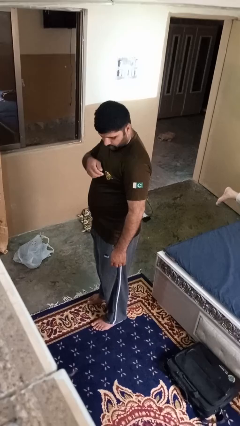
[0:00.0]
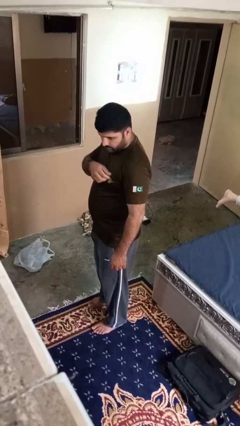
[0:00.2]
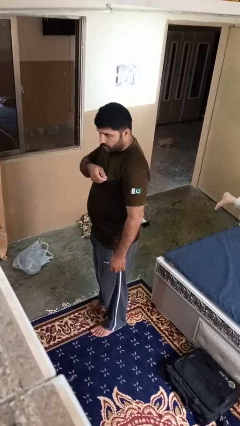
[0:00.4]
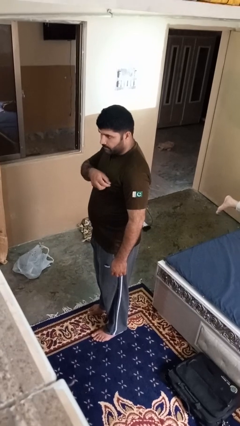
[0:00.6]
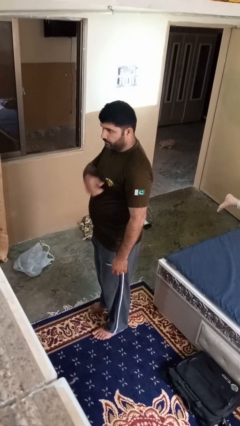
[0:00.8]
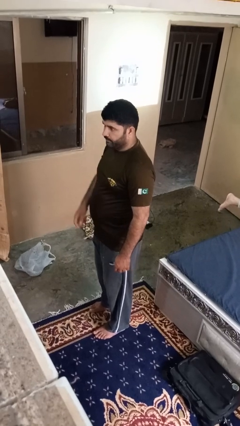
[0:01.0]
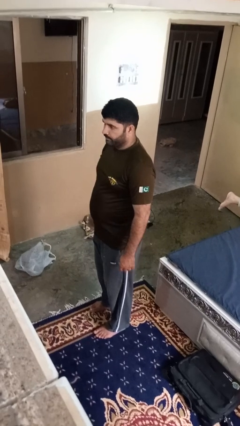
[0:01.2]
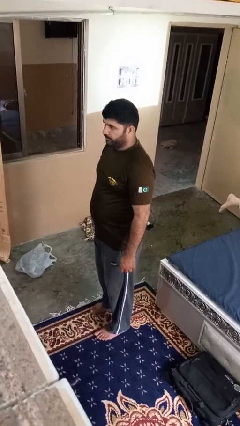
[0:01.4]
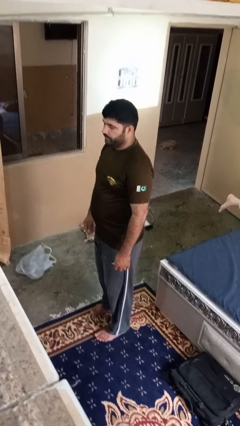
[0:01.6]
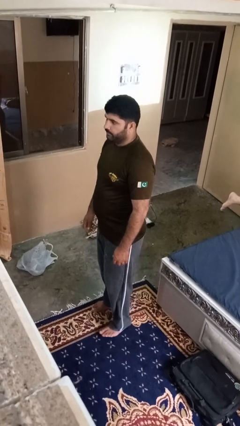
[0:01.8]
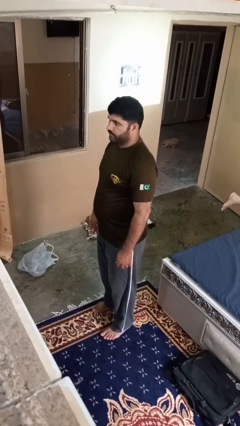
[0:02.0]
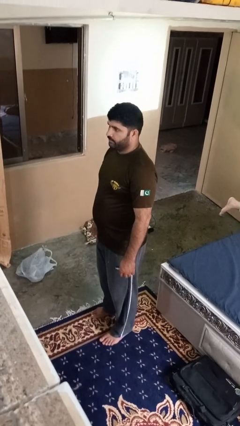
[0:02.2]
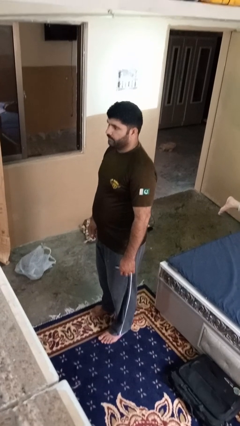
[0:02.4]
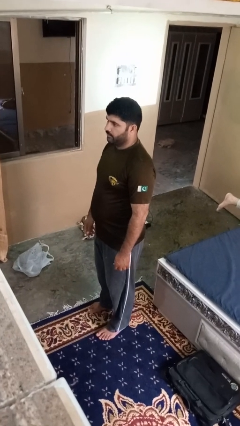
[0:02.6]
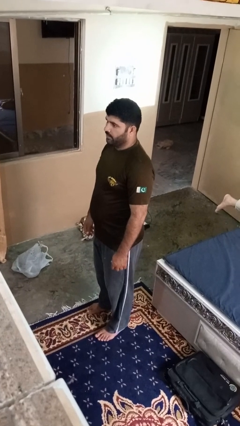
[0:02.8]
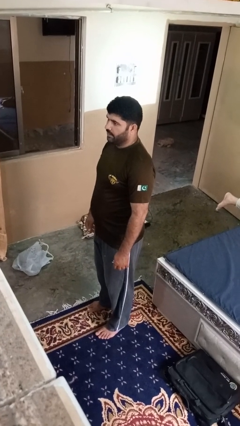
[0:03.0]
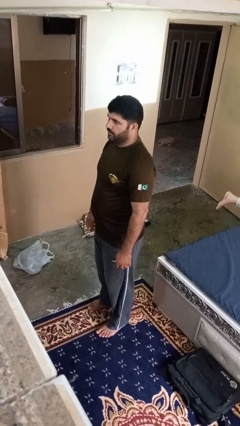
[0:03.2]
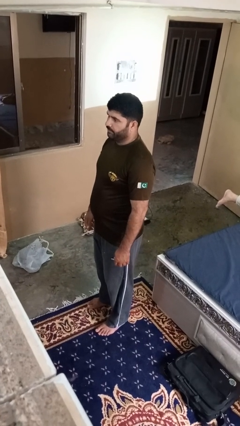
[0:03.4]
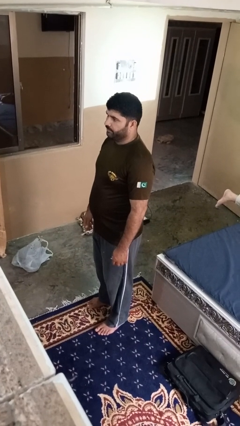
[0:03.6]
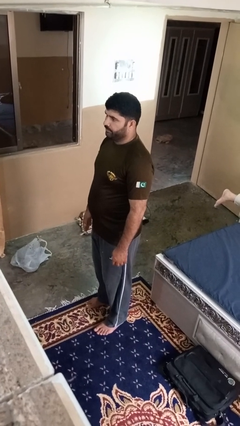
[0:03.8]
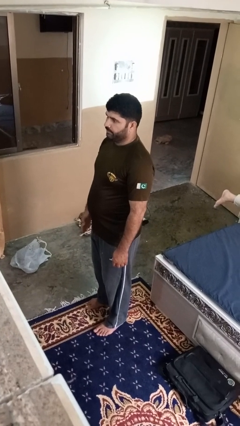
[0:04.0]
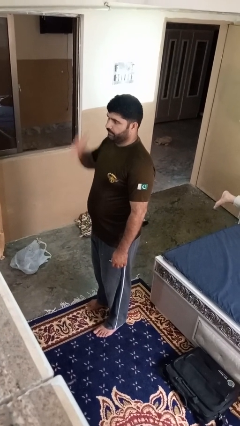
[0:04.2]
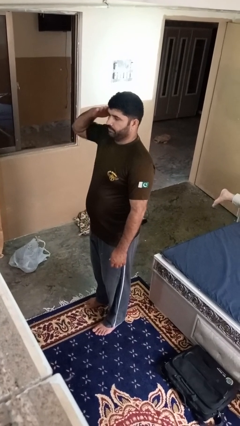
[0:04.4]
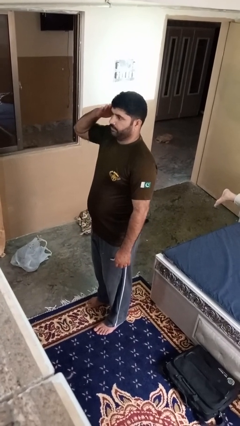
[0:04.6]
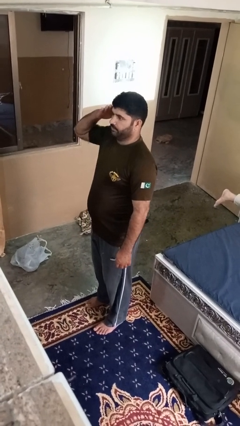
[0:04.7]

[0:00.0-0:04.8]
person salutes

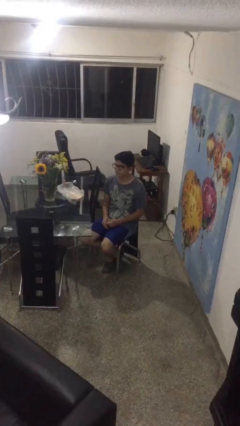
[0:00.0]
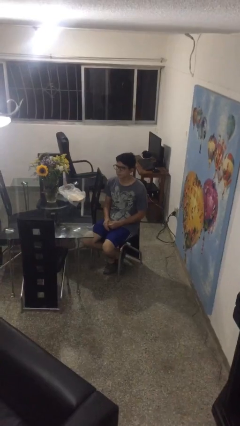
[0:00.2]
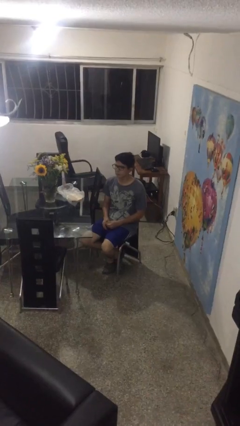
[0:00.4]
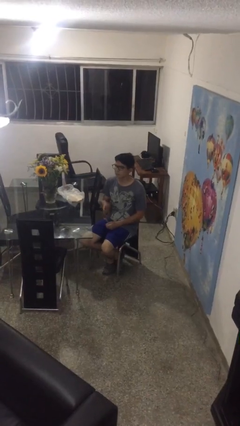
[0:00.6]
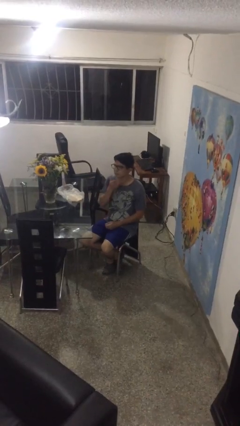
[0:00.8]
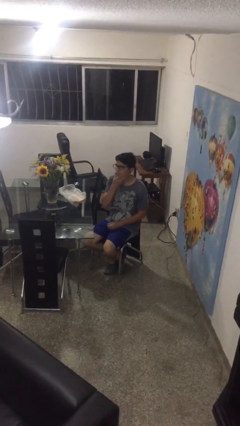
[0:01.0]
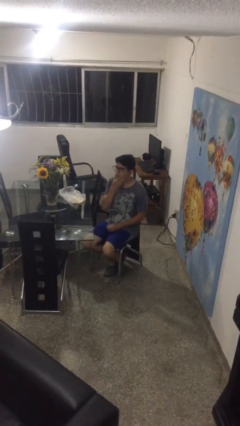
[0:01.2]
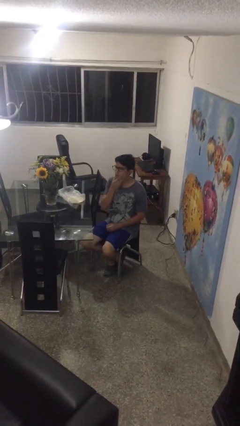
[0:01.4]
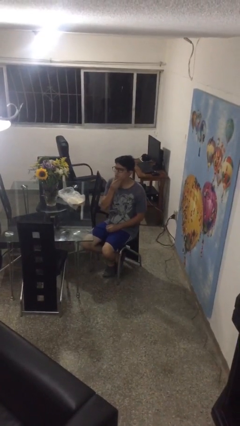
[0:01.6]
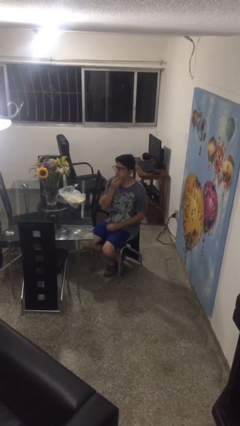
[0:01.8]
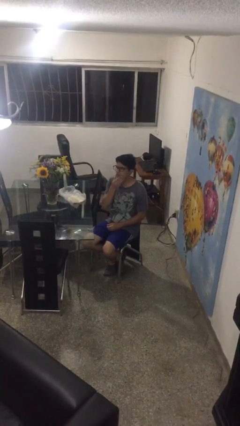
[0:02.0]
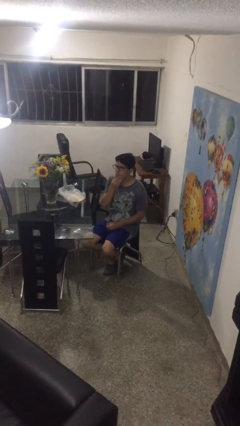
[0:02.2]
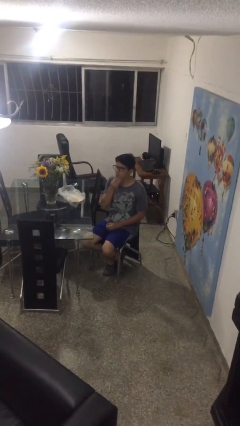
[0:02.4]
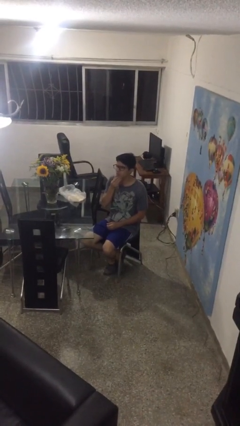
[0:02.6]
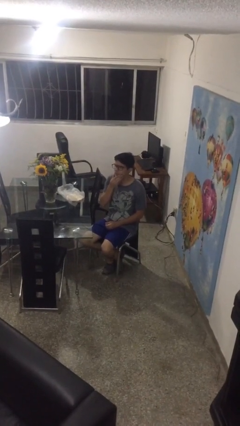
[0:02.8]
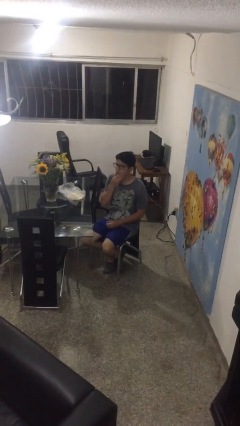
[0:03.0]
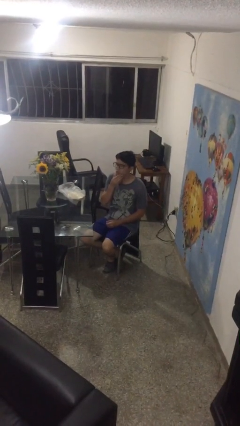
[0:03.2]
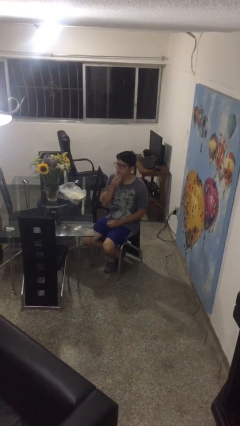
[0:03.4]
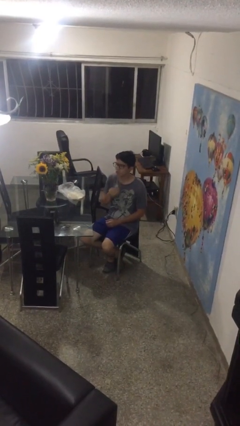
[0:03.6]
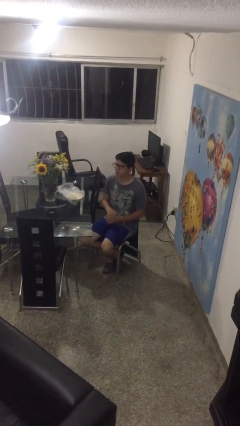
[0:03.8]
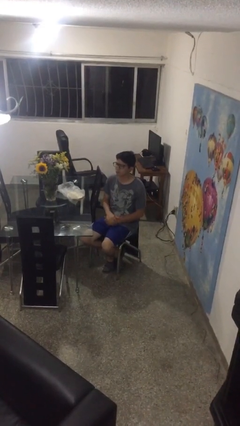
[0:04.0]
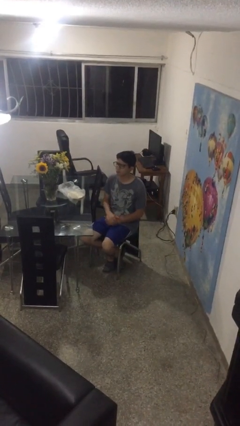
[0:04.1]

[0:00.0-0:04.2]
person strokes chin

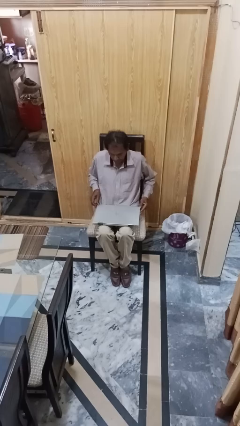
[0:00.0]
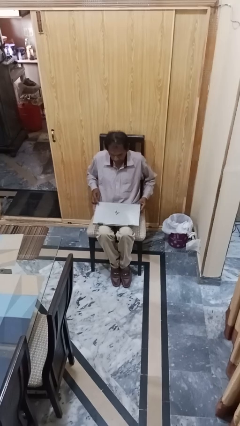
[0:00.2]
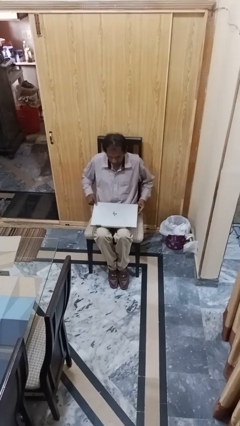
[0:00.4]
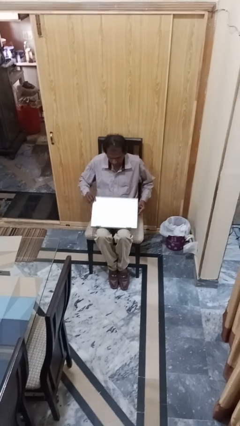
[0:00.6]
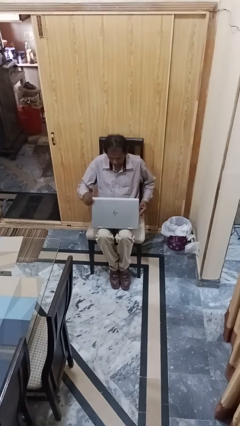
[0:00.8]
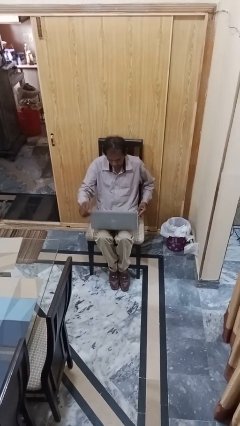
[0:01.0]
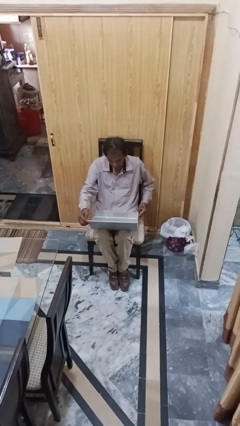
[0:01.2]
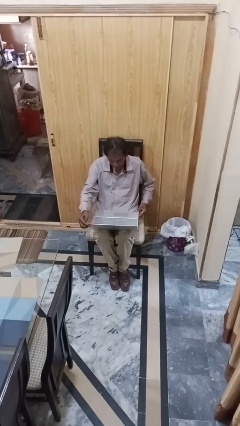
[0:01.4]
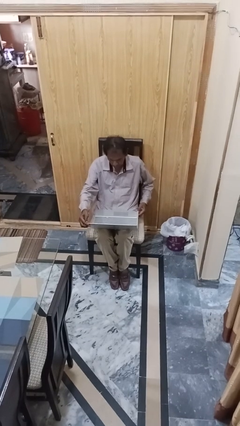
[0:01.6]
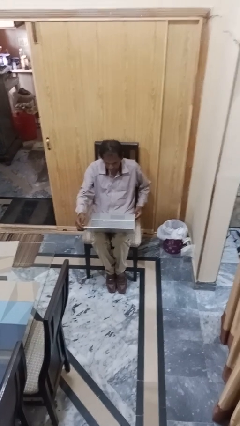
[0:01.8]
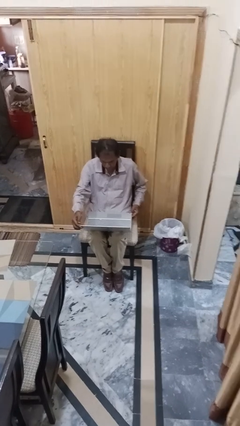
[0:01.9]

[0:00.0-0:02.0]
person opens laptop

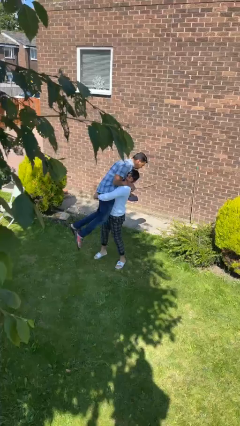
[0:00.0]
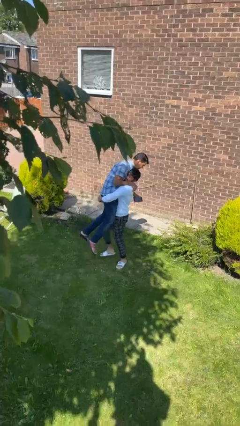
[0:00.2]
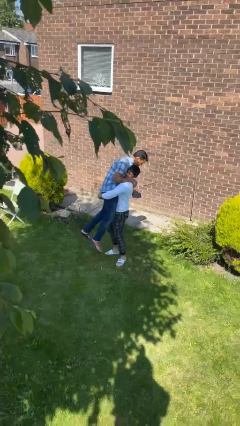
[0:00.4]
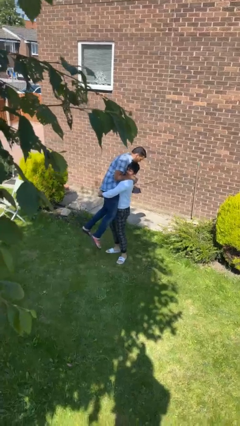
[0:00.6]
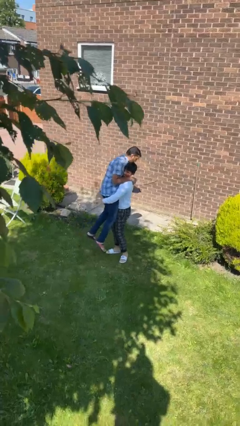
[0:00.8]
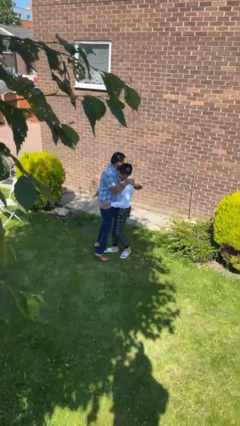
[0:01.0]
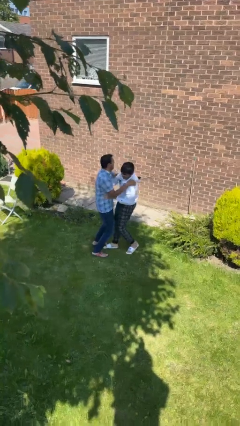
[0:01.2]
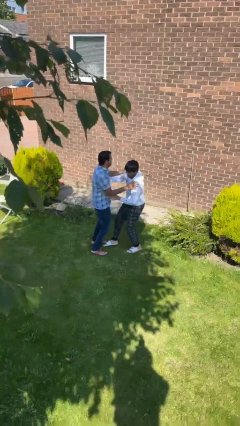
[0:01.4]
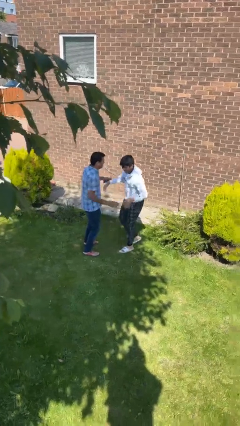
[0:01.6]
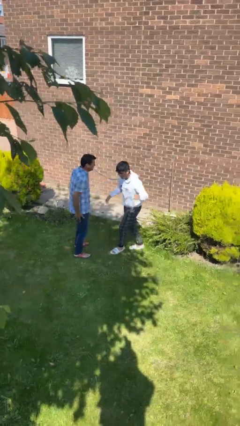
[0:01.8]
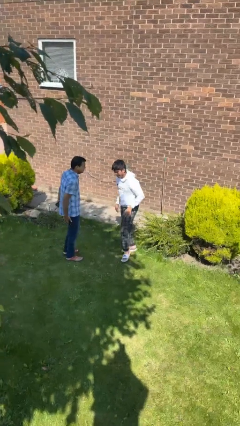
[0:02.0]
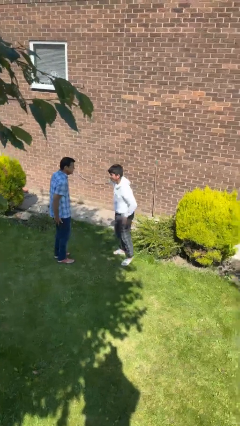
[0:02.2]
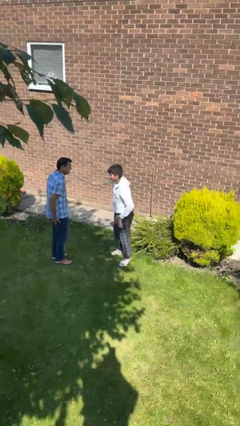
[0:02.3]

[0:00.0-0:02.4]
person puts down person

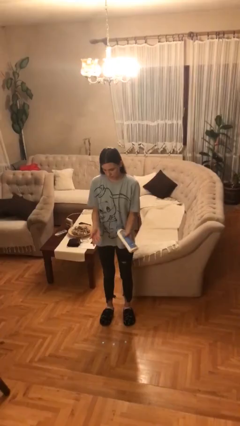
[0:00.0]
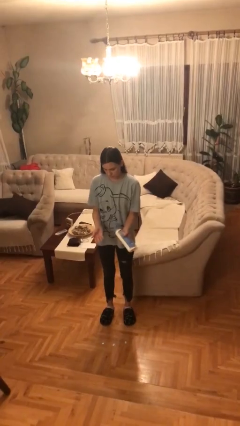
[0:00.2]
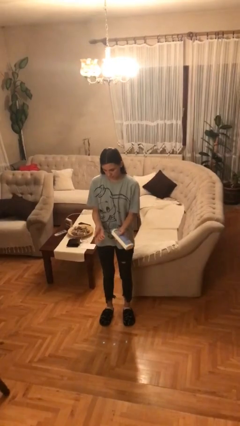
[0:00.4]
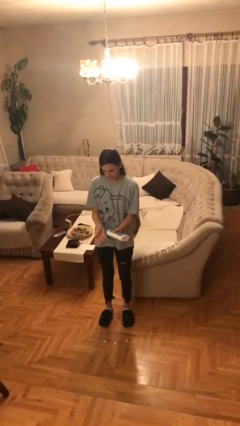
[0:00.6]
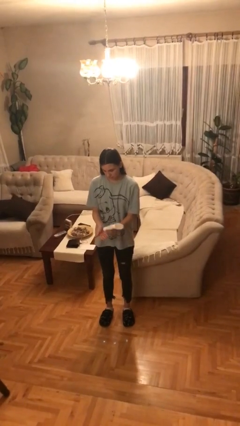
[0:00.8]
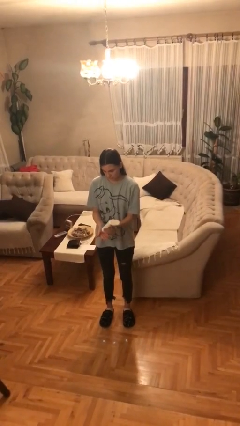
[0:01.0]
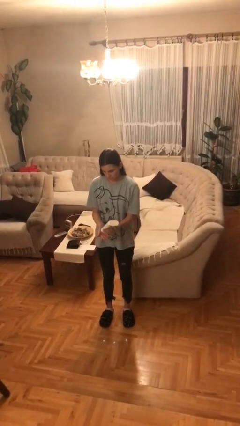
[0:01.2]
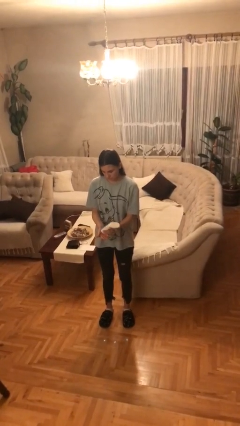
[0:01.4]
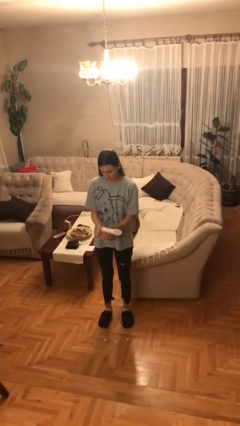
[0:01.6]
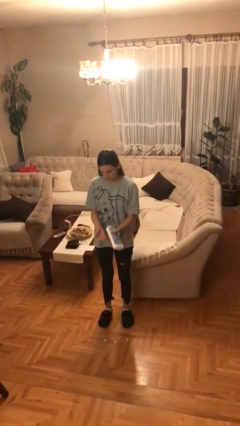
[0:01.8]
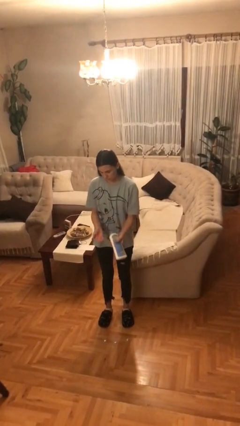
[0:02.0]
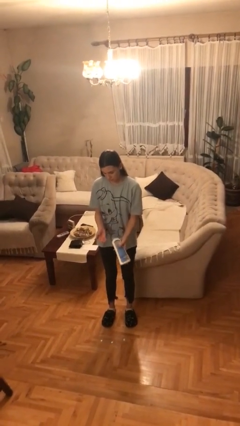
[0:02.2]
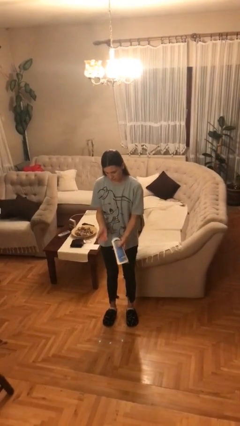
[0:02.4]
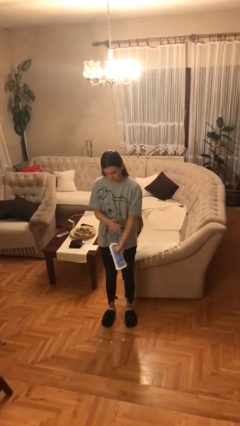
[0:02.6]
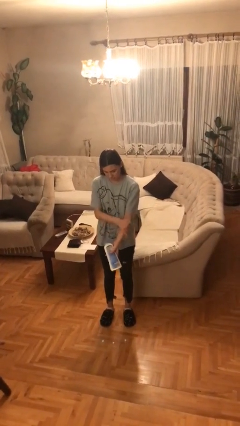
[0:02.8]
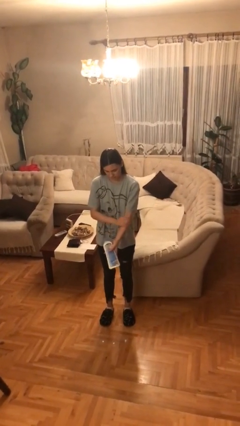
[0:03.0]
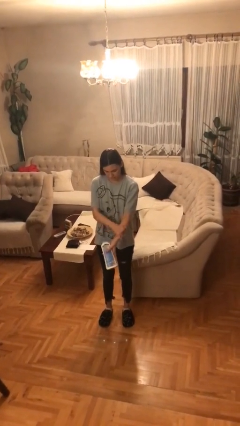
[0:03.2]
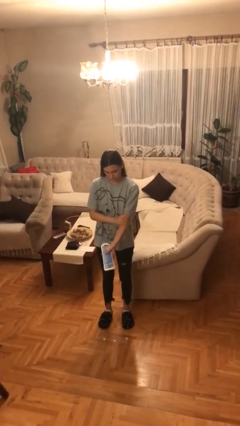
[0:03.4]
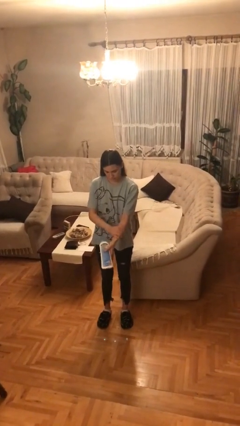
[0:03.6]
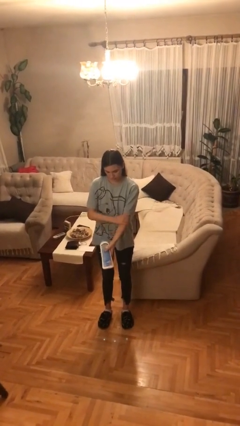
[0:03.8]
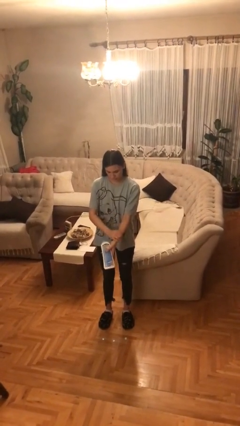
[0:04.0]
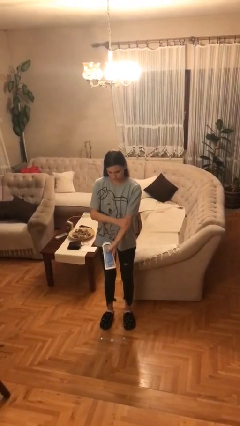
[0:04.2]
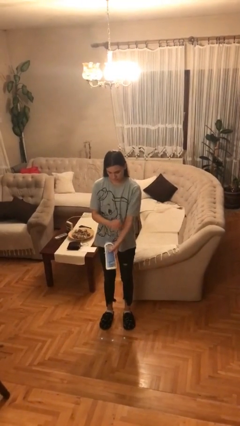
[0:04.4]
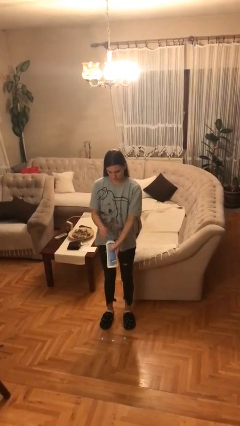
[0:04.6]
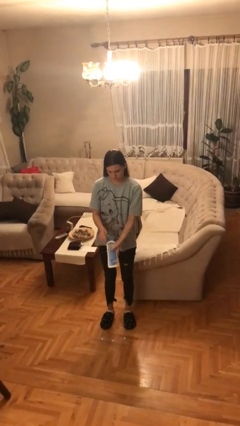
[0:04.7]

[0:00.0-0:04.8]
person applies sunscreen
